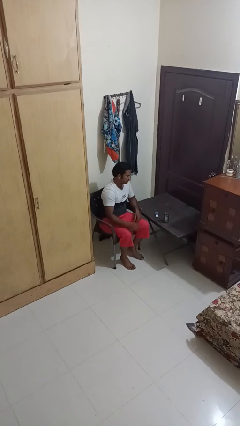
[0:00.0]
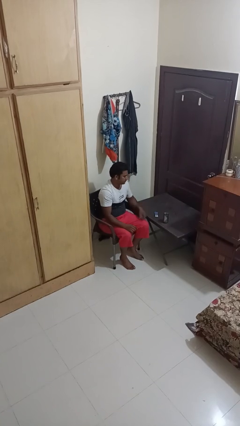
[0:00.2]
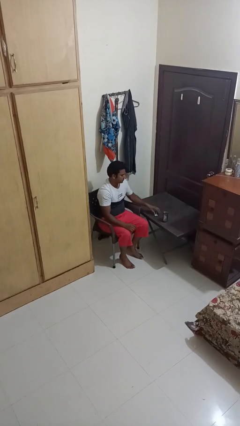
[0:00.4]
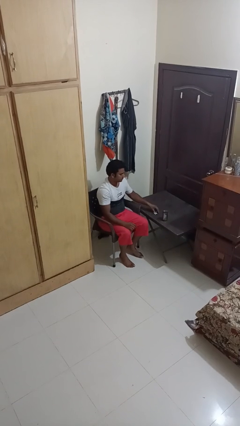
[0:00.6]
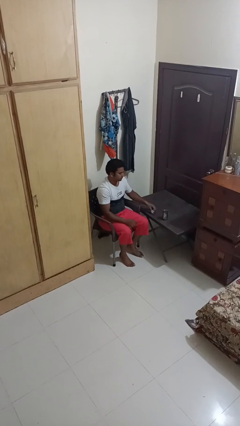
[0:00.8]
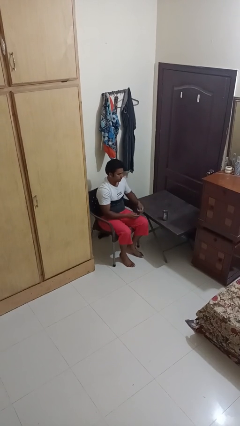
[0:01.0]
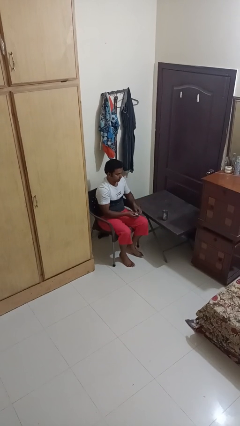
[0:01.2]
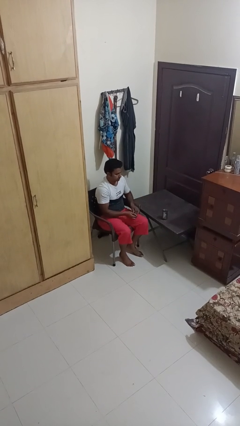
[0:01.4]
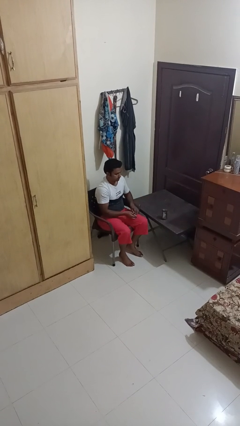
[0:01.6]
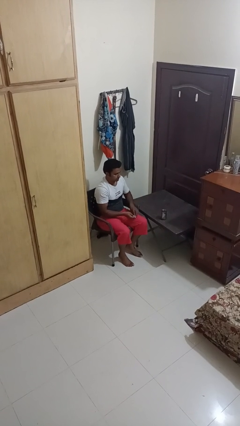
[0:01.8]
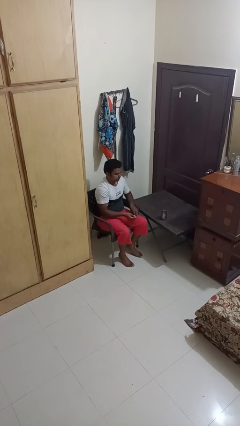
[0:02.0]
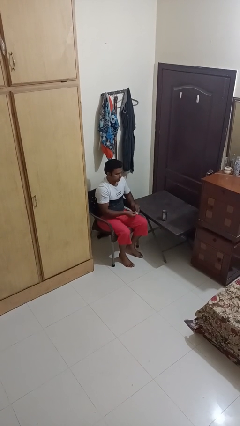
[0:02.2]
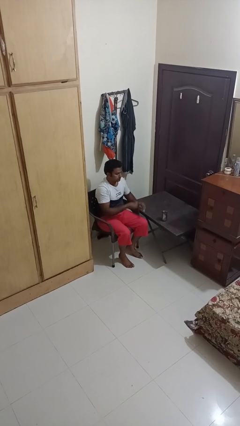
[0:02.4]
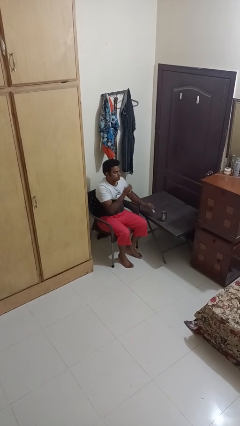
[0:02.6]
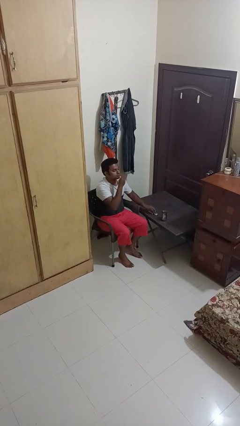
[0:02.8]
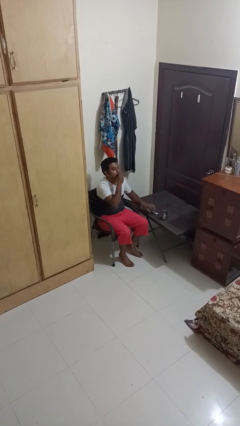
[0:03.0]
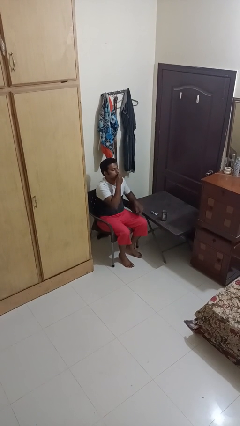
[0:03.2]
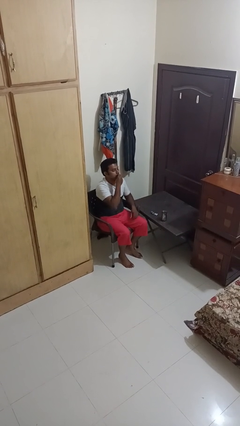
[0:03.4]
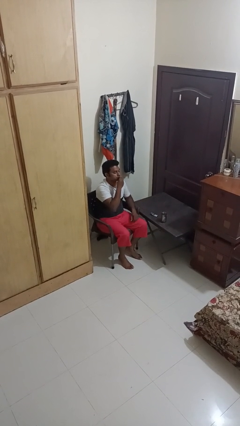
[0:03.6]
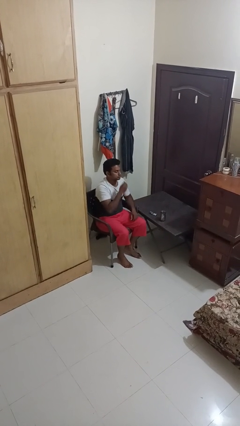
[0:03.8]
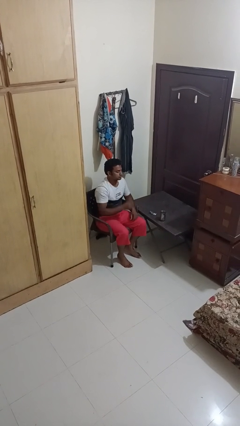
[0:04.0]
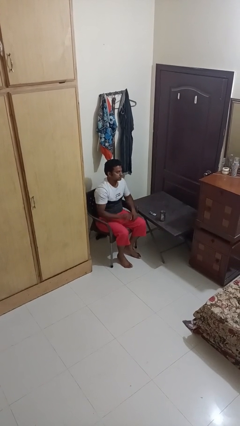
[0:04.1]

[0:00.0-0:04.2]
person takes medicine pills

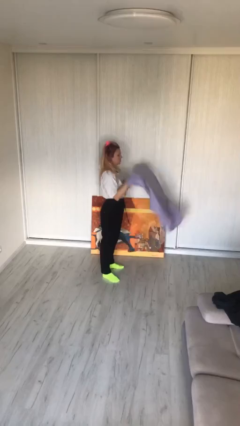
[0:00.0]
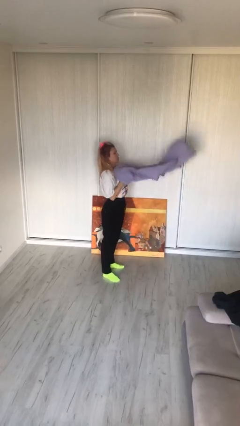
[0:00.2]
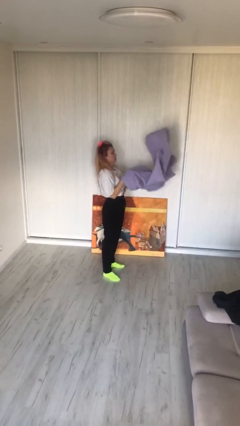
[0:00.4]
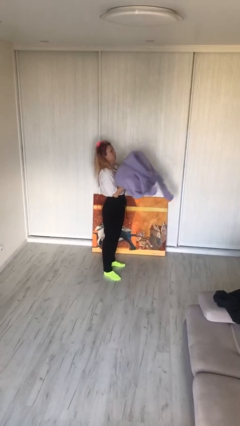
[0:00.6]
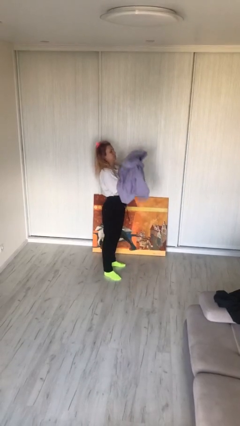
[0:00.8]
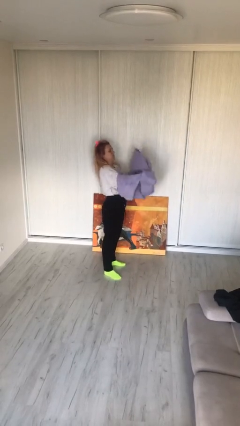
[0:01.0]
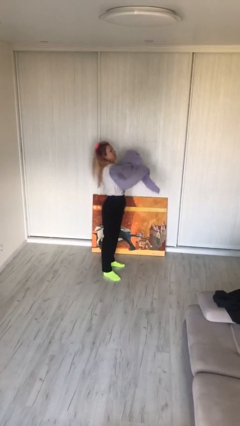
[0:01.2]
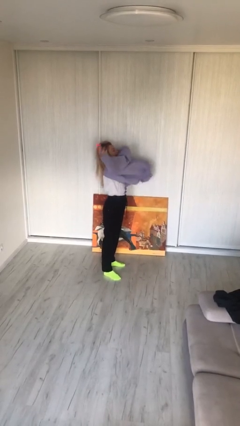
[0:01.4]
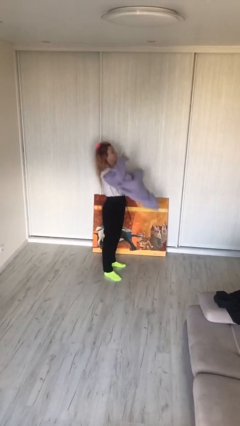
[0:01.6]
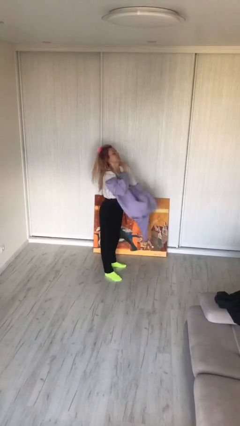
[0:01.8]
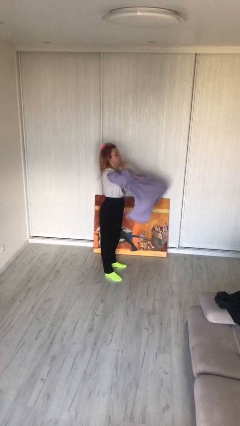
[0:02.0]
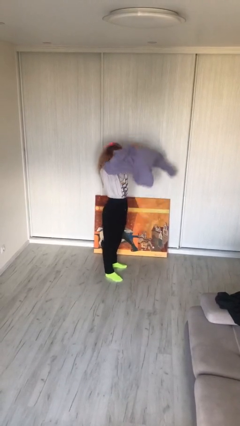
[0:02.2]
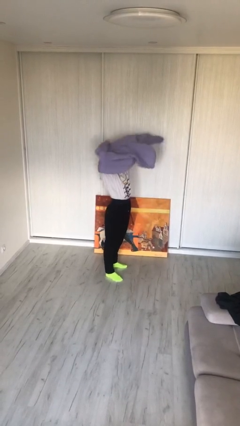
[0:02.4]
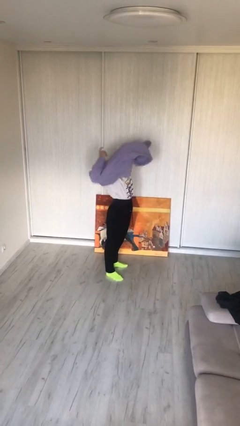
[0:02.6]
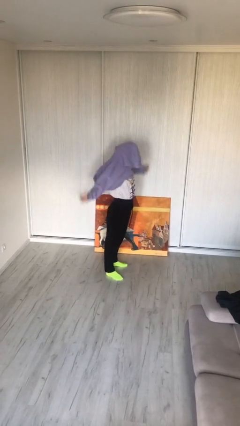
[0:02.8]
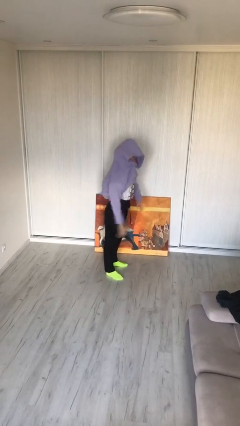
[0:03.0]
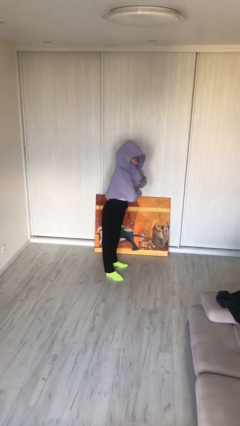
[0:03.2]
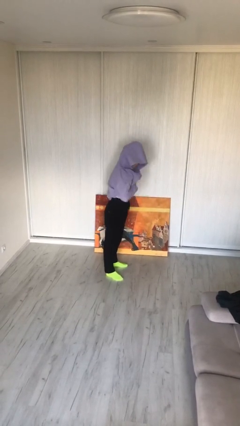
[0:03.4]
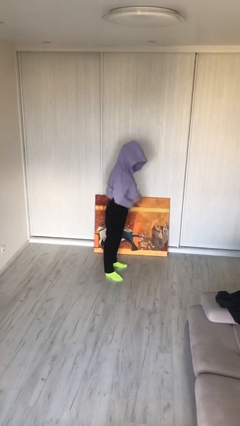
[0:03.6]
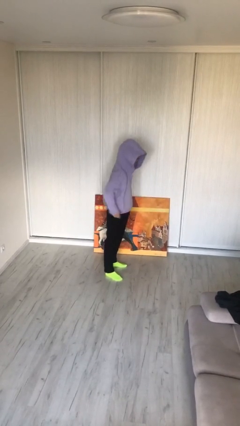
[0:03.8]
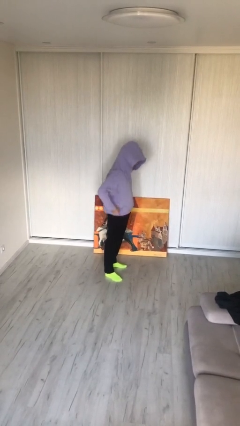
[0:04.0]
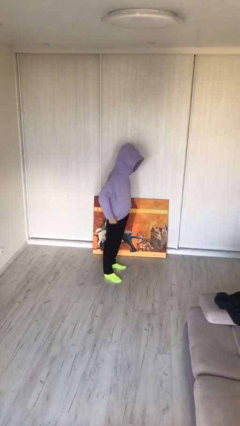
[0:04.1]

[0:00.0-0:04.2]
person puts on hoodie

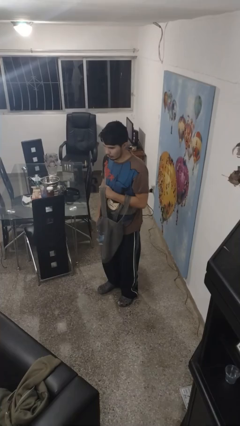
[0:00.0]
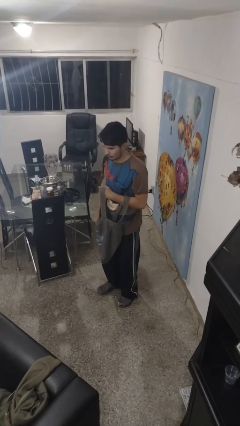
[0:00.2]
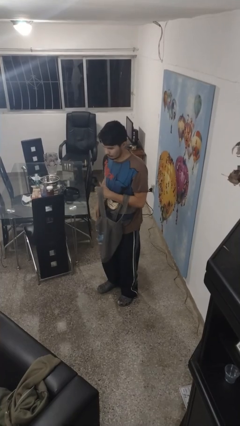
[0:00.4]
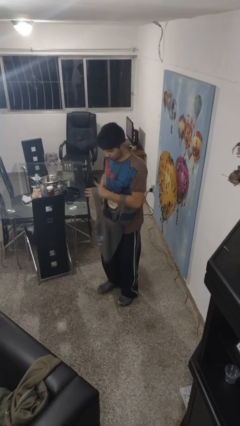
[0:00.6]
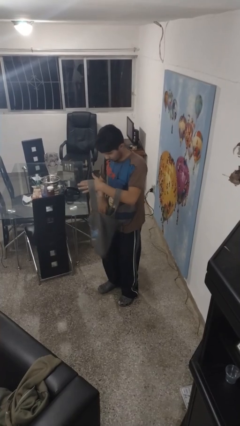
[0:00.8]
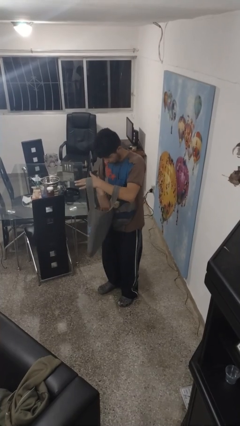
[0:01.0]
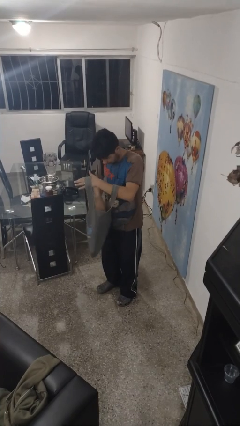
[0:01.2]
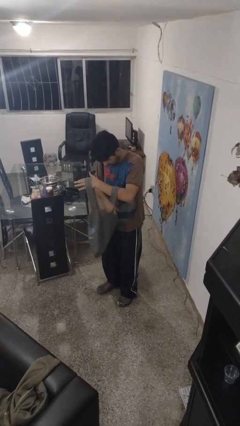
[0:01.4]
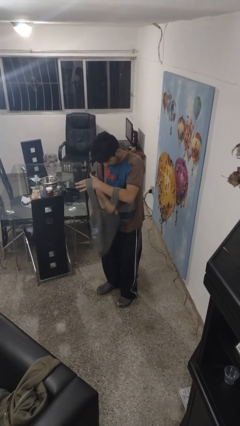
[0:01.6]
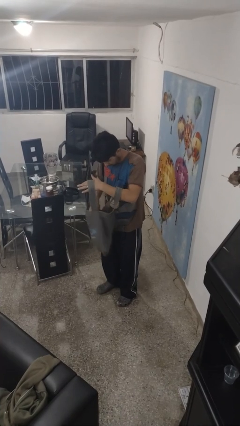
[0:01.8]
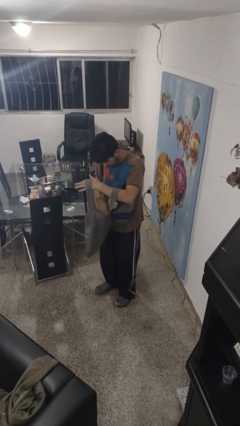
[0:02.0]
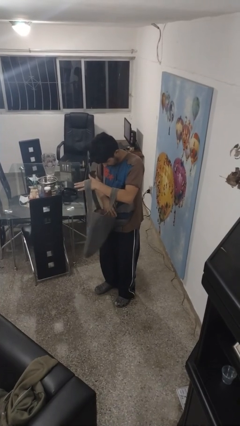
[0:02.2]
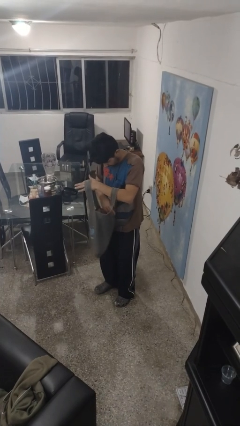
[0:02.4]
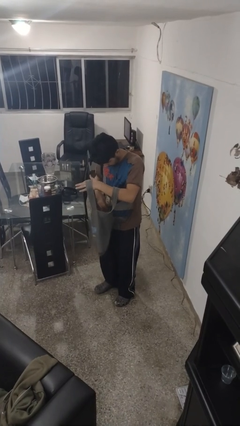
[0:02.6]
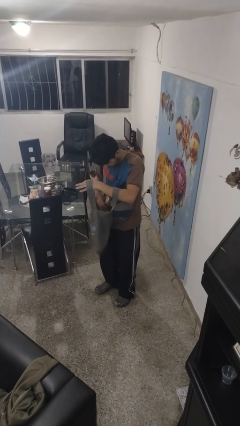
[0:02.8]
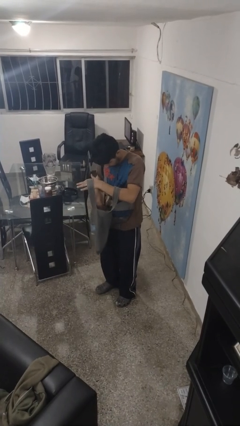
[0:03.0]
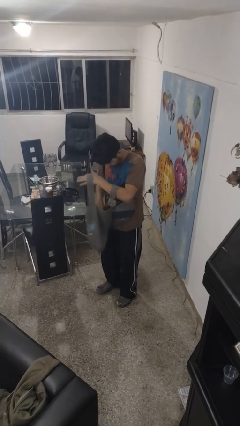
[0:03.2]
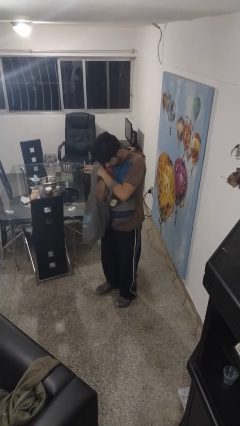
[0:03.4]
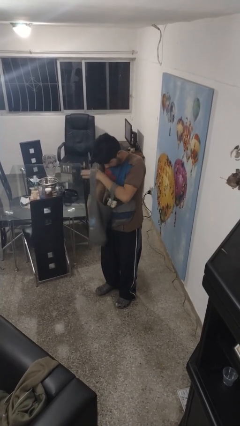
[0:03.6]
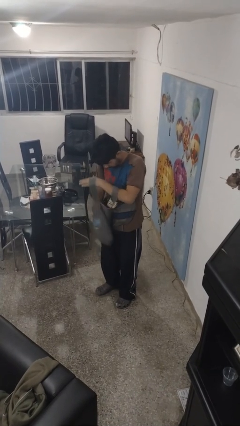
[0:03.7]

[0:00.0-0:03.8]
person searches in purse

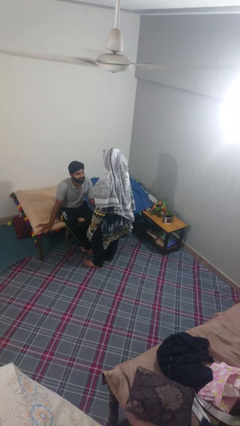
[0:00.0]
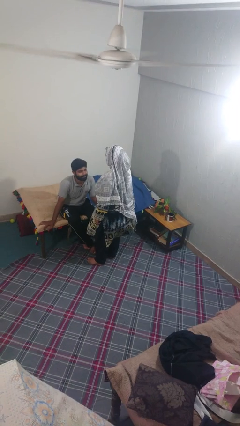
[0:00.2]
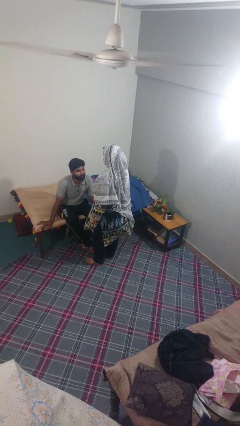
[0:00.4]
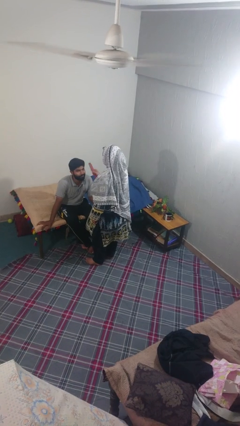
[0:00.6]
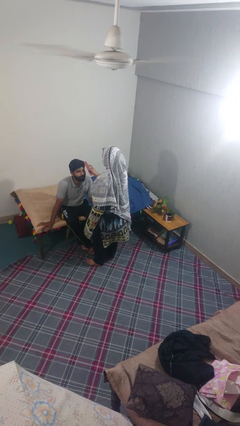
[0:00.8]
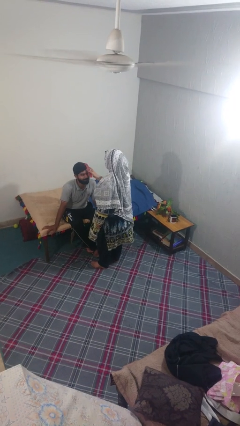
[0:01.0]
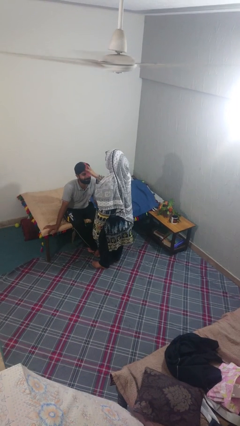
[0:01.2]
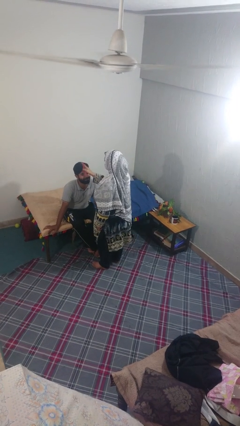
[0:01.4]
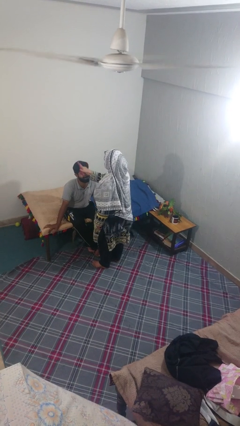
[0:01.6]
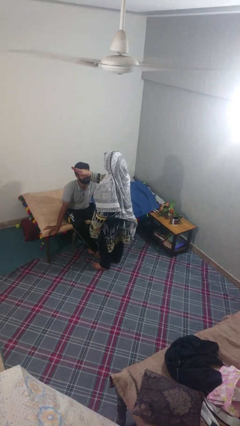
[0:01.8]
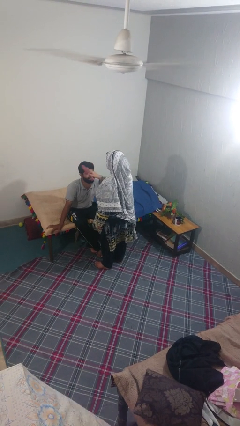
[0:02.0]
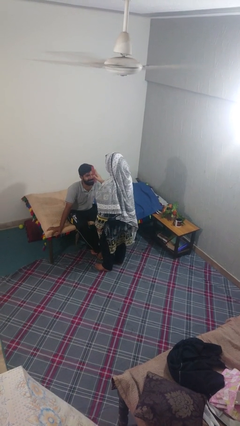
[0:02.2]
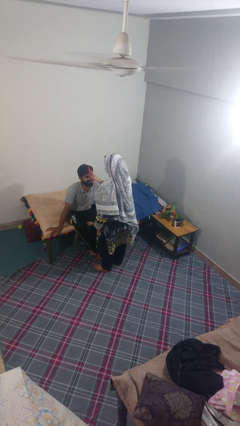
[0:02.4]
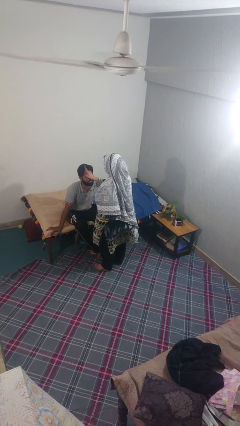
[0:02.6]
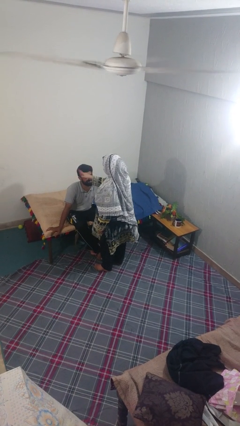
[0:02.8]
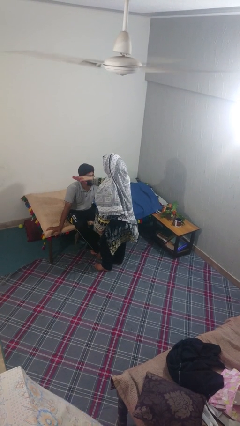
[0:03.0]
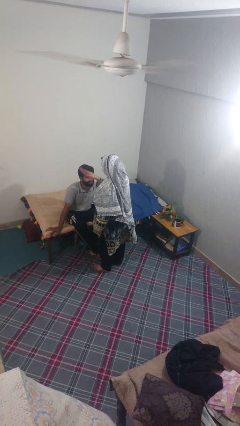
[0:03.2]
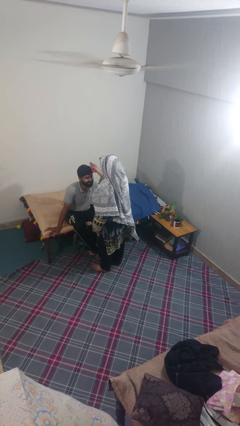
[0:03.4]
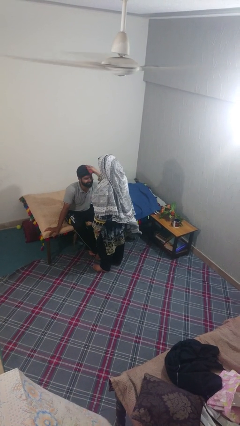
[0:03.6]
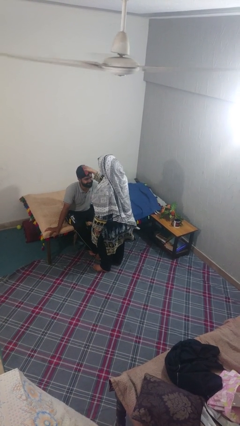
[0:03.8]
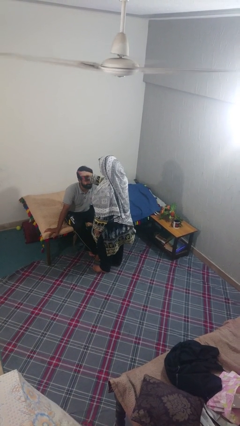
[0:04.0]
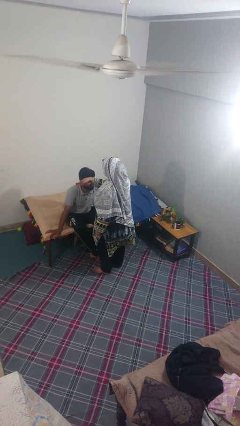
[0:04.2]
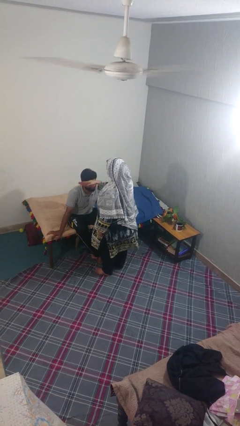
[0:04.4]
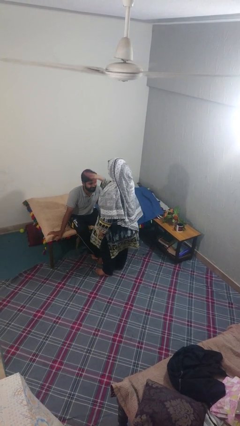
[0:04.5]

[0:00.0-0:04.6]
person brushes hair of person

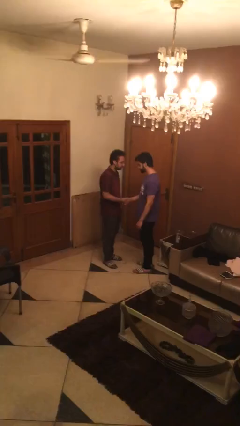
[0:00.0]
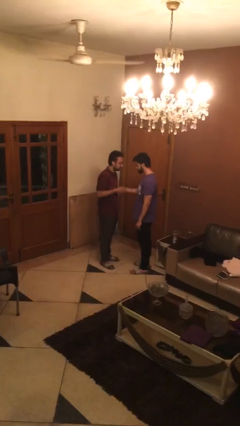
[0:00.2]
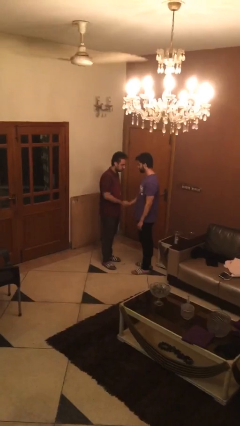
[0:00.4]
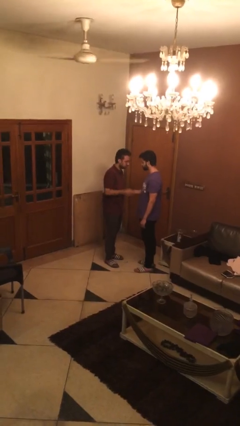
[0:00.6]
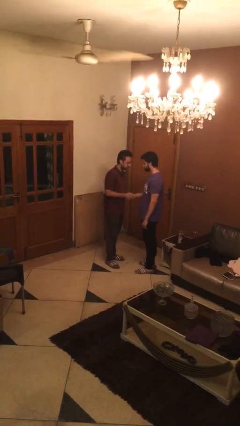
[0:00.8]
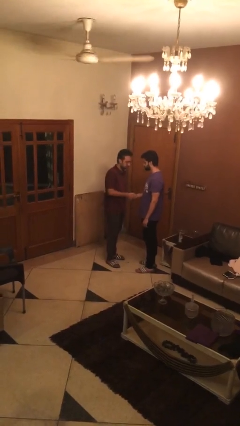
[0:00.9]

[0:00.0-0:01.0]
person shakes hand

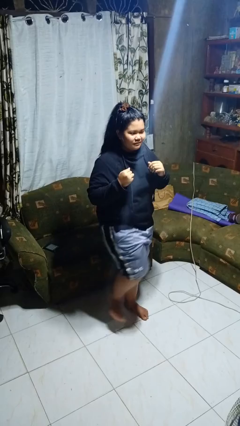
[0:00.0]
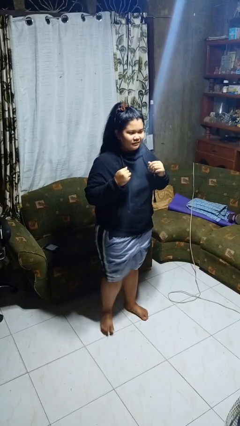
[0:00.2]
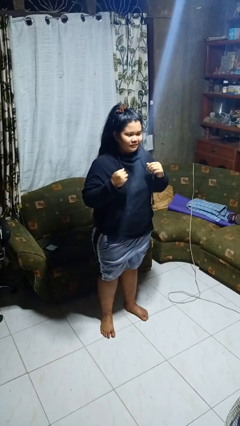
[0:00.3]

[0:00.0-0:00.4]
person karate kicks
